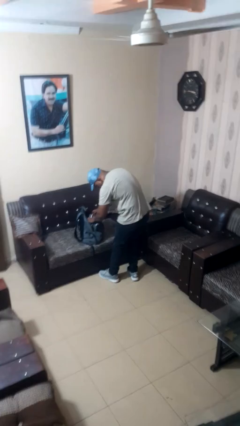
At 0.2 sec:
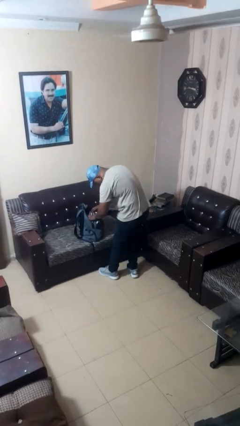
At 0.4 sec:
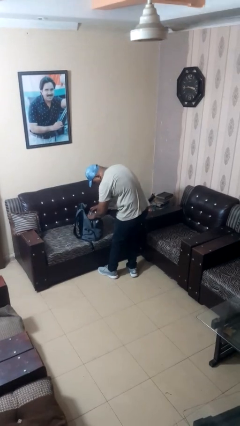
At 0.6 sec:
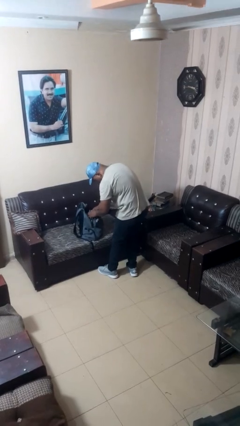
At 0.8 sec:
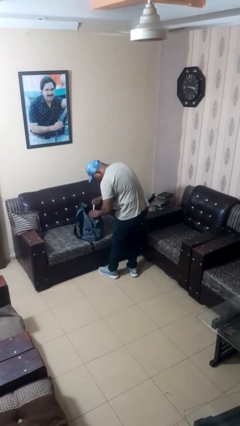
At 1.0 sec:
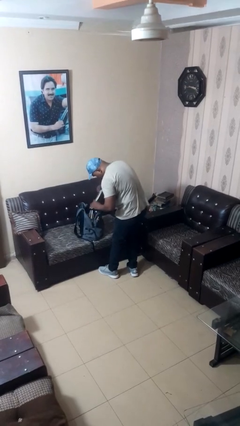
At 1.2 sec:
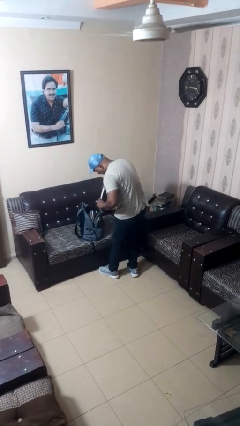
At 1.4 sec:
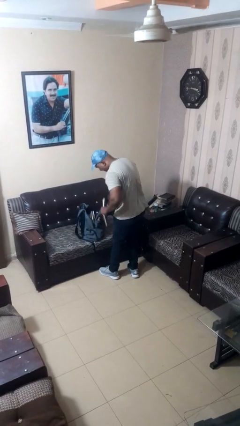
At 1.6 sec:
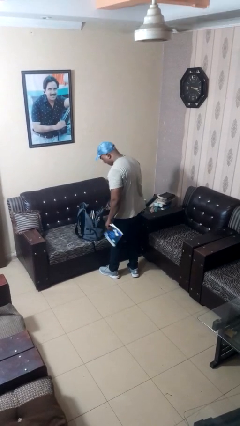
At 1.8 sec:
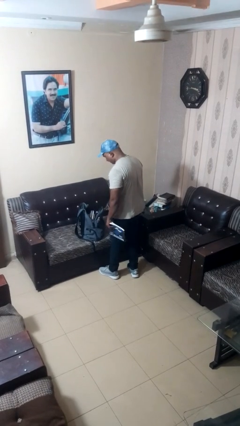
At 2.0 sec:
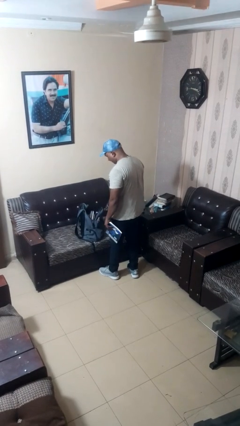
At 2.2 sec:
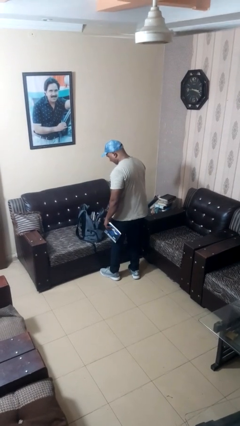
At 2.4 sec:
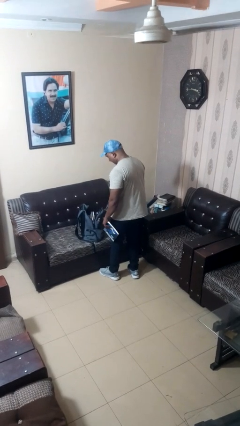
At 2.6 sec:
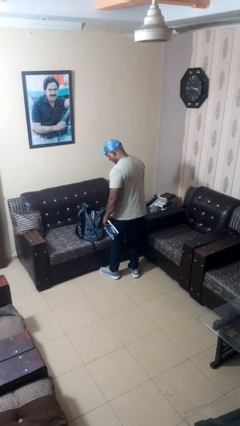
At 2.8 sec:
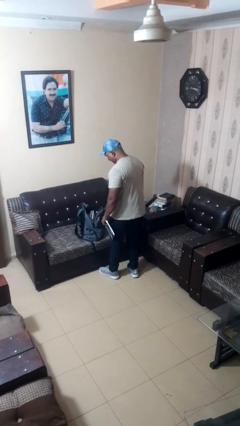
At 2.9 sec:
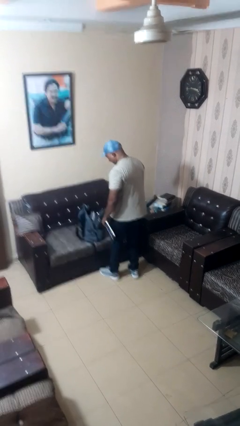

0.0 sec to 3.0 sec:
person takes object from backpack

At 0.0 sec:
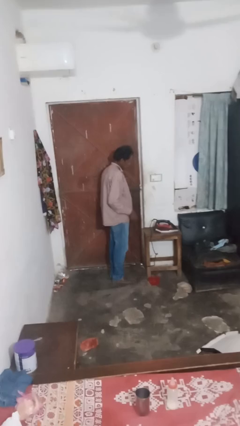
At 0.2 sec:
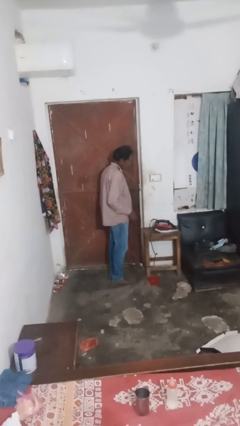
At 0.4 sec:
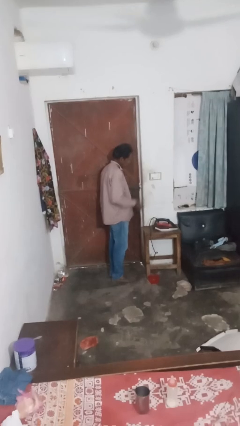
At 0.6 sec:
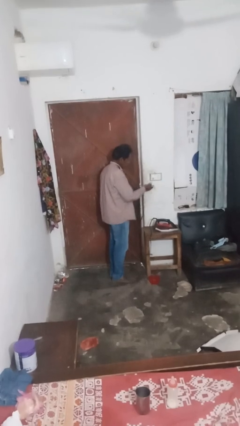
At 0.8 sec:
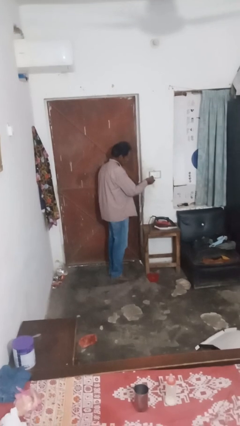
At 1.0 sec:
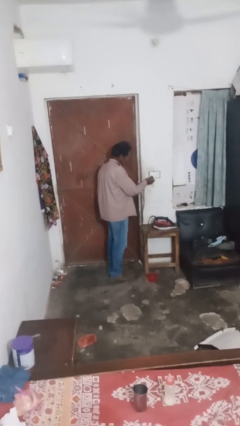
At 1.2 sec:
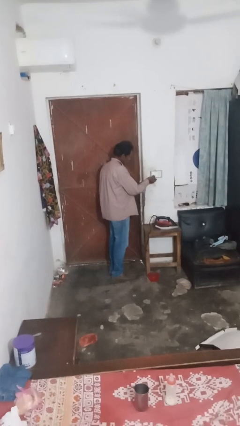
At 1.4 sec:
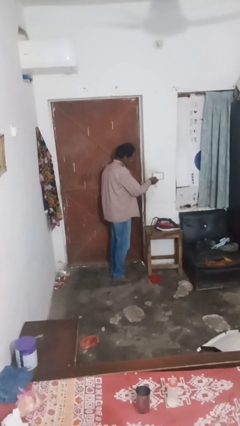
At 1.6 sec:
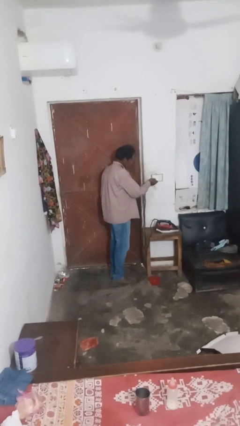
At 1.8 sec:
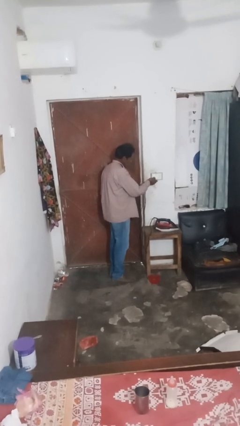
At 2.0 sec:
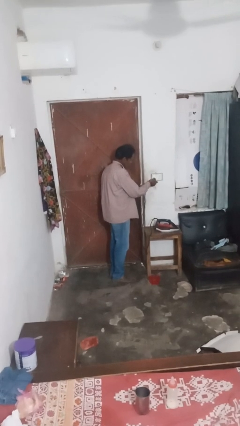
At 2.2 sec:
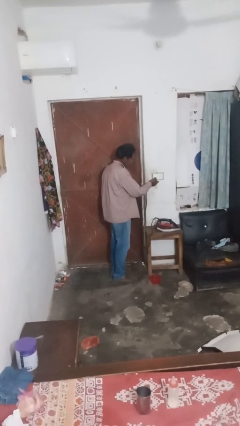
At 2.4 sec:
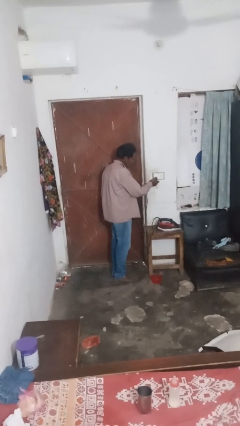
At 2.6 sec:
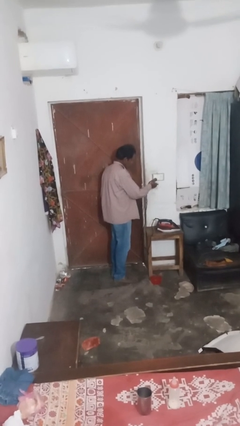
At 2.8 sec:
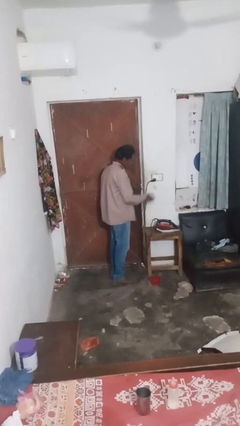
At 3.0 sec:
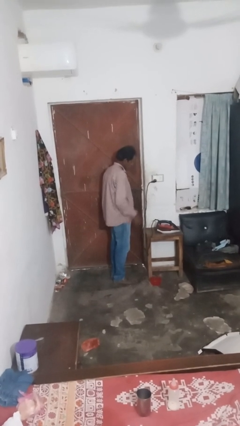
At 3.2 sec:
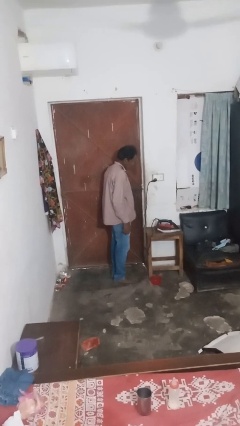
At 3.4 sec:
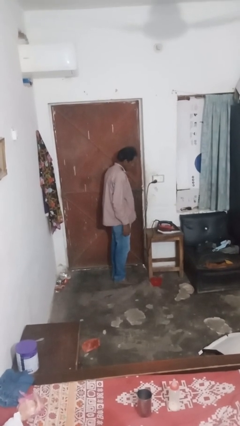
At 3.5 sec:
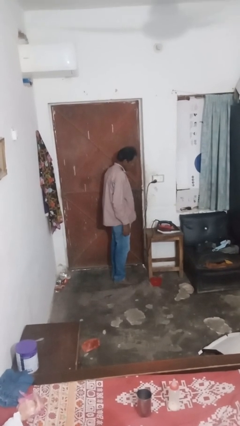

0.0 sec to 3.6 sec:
person plugs into electrical socket

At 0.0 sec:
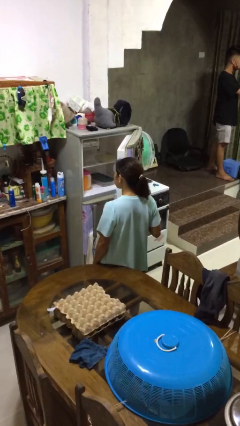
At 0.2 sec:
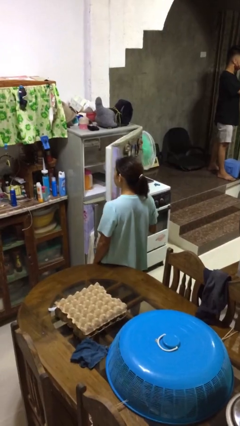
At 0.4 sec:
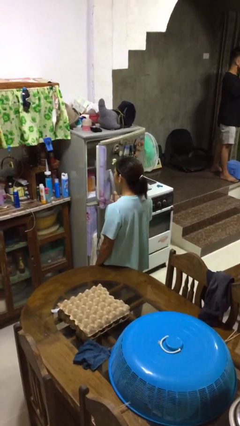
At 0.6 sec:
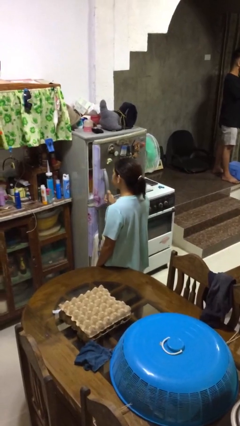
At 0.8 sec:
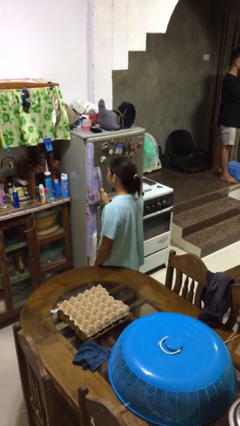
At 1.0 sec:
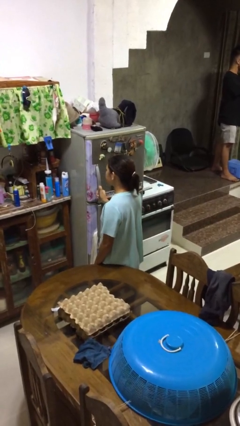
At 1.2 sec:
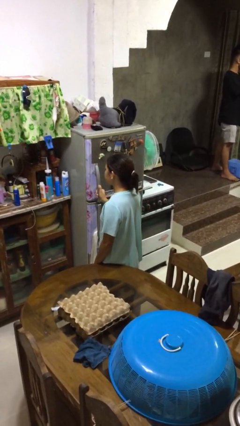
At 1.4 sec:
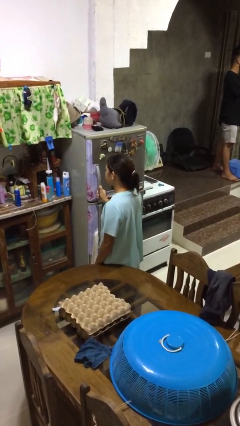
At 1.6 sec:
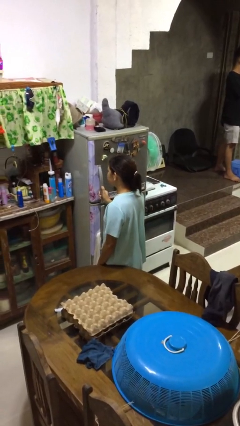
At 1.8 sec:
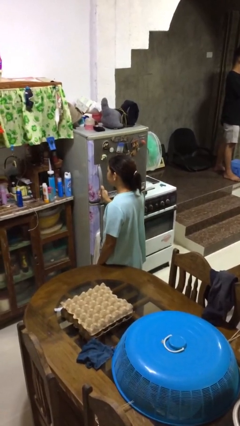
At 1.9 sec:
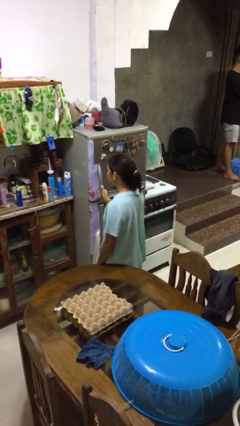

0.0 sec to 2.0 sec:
person closes refrigerator

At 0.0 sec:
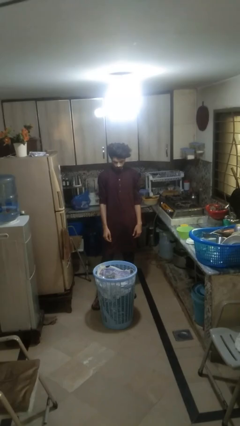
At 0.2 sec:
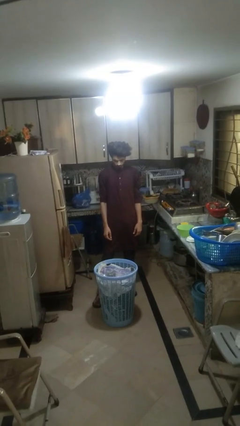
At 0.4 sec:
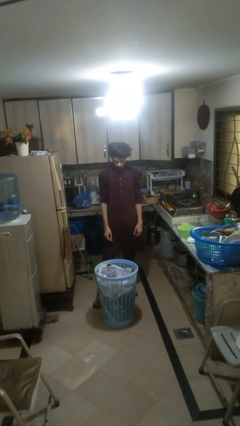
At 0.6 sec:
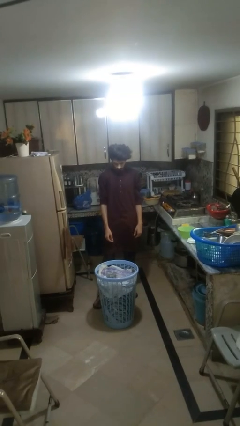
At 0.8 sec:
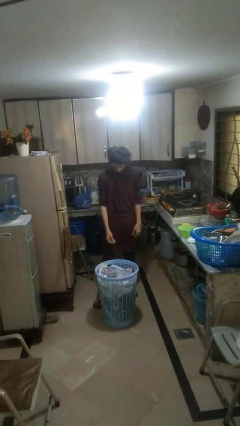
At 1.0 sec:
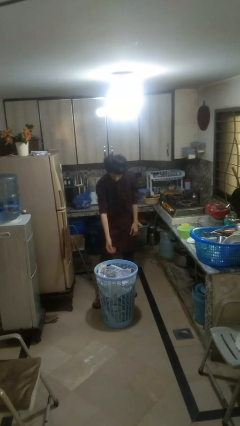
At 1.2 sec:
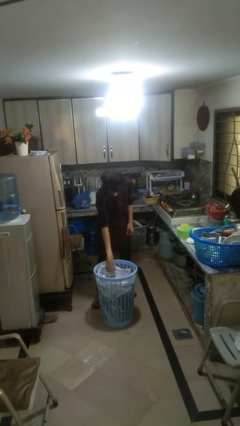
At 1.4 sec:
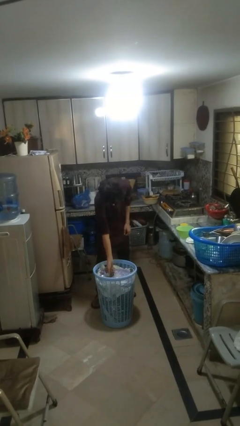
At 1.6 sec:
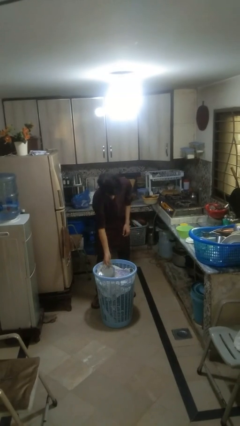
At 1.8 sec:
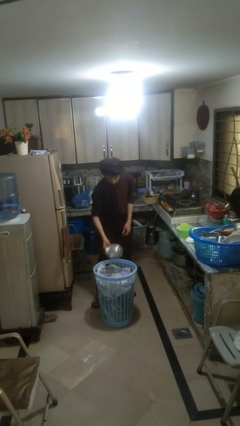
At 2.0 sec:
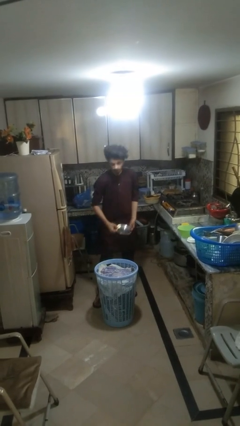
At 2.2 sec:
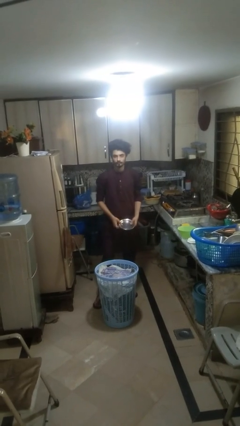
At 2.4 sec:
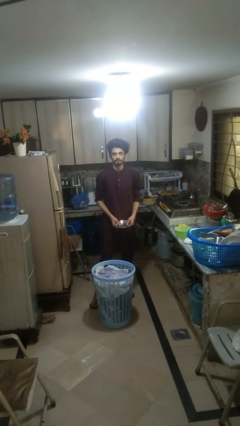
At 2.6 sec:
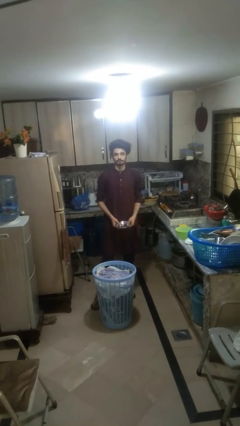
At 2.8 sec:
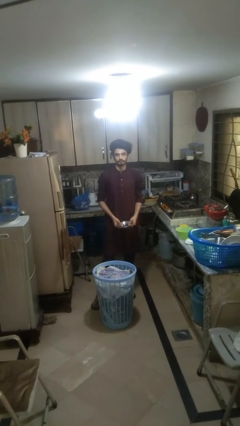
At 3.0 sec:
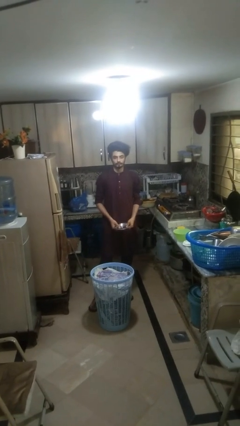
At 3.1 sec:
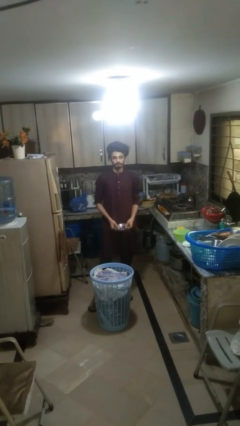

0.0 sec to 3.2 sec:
person takes object from basket

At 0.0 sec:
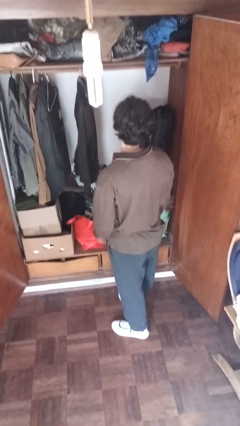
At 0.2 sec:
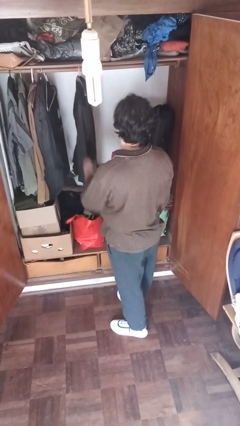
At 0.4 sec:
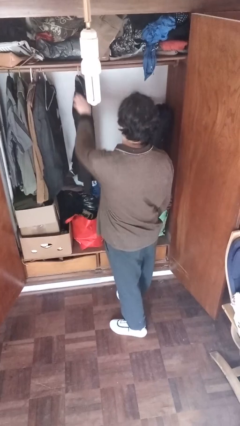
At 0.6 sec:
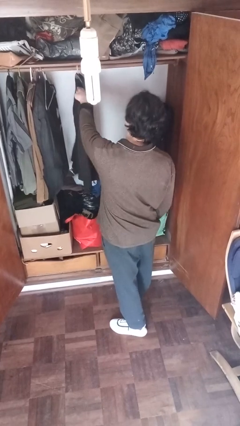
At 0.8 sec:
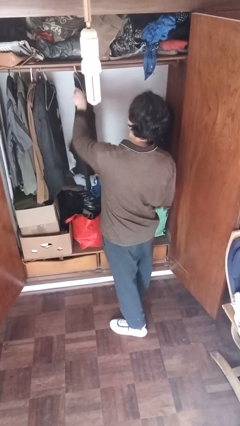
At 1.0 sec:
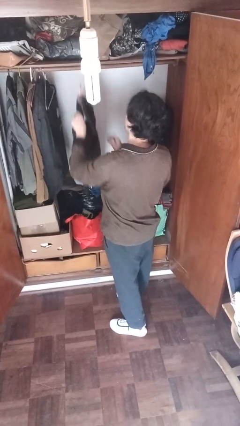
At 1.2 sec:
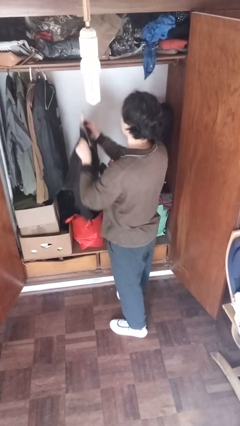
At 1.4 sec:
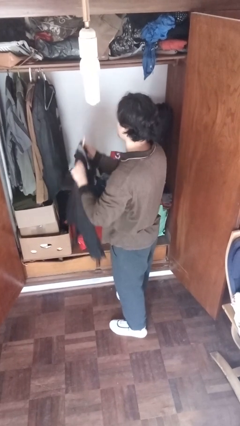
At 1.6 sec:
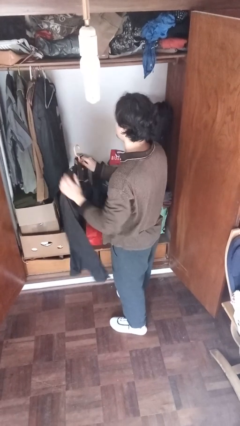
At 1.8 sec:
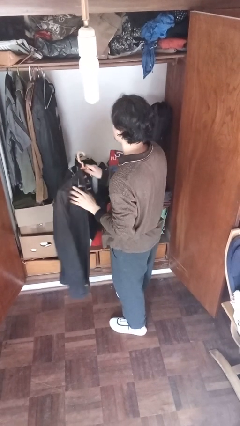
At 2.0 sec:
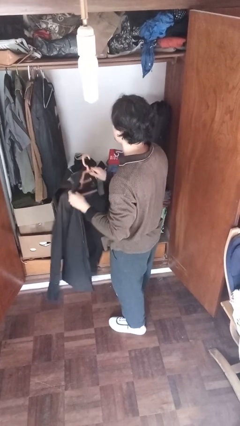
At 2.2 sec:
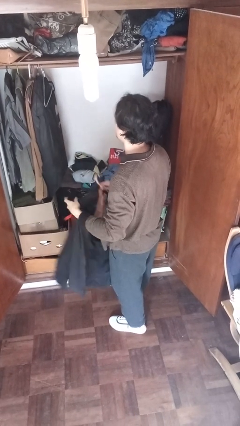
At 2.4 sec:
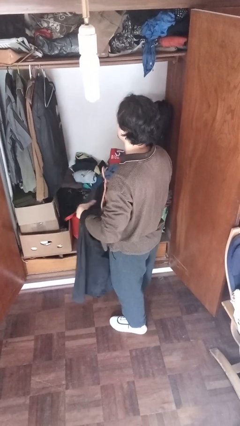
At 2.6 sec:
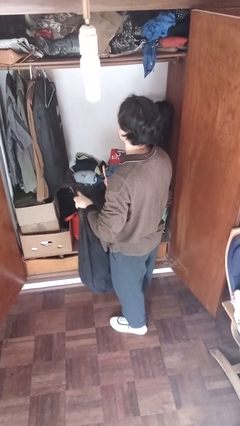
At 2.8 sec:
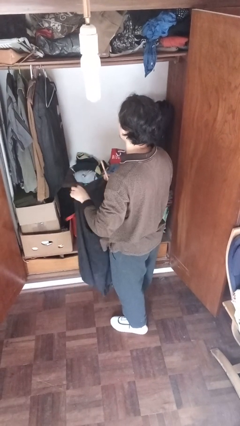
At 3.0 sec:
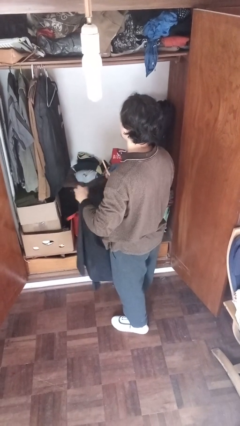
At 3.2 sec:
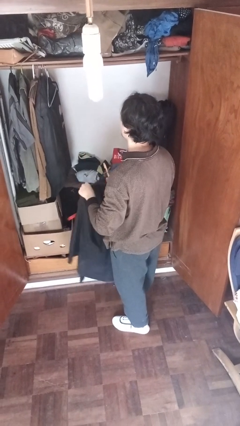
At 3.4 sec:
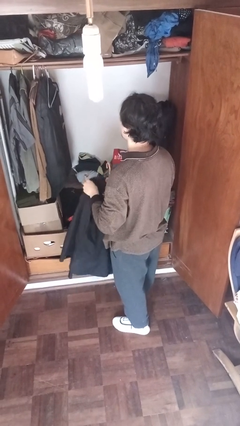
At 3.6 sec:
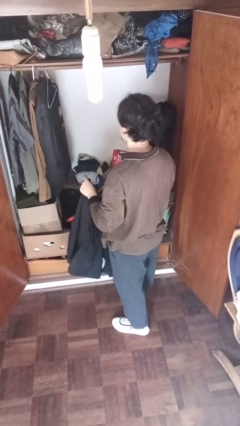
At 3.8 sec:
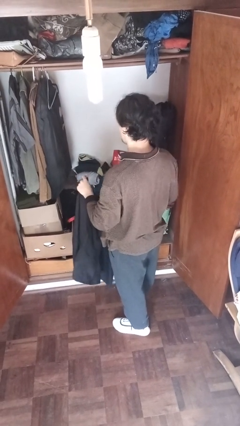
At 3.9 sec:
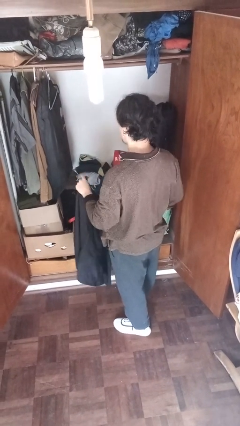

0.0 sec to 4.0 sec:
person takes clothes from closet

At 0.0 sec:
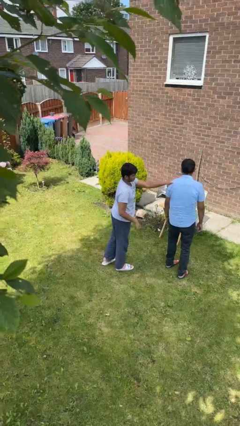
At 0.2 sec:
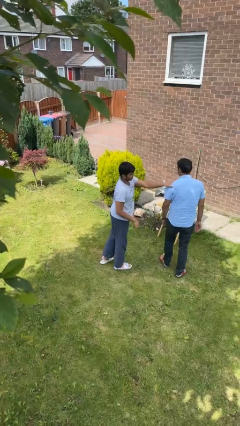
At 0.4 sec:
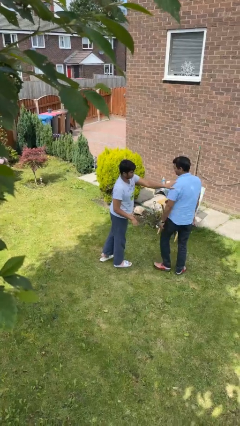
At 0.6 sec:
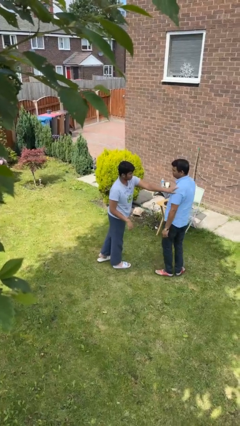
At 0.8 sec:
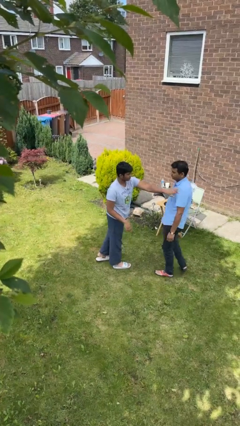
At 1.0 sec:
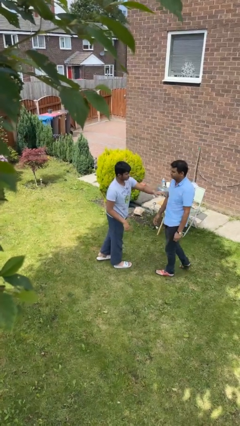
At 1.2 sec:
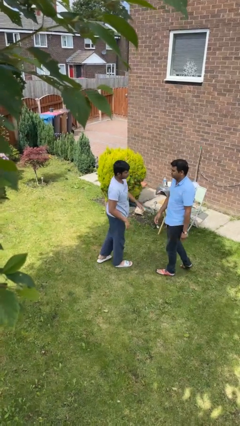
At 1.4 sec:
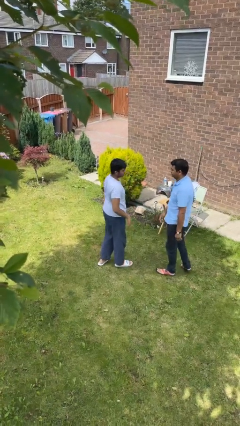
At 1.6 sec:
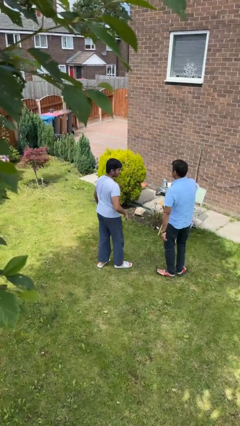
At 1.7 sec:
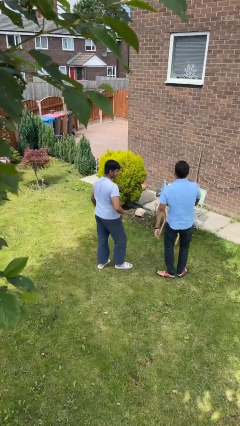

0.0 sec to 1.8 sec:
person spins person around
